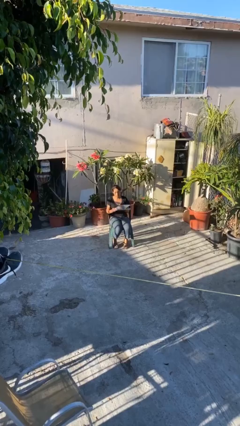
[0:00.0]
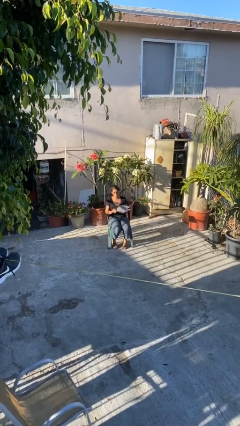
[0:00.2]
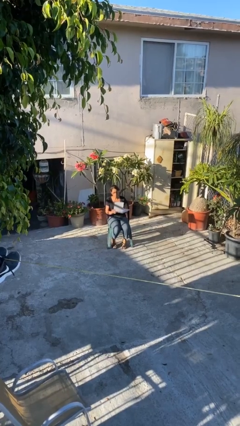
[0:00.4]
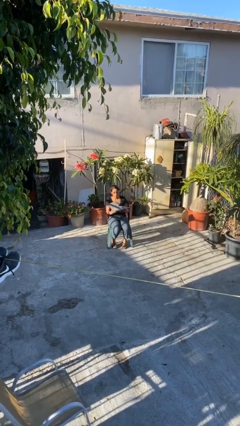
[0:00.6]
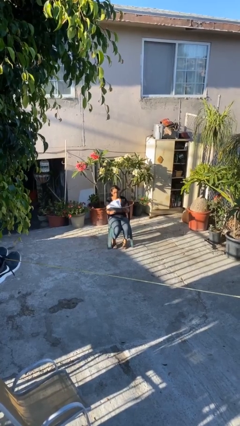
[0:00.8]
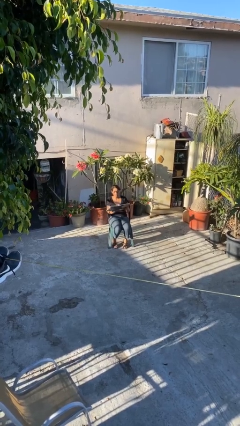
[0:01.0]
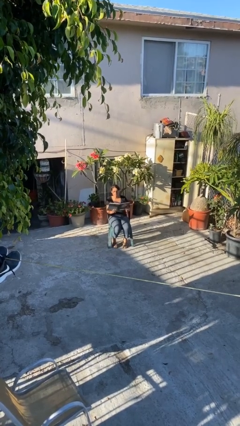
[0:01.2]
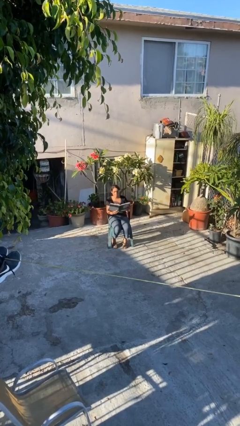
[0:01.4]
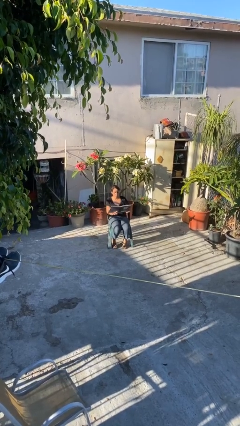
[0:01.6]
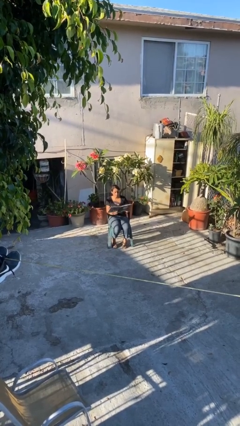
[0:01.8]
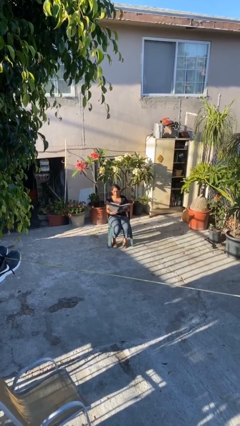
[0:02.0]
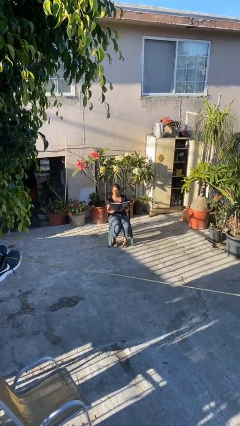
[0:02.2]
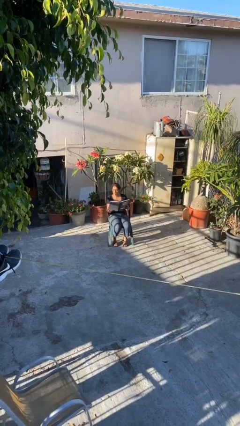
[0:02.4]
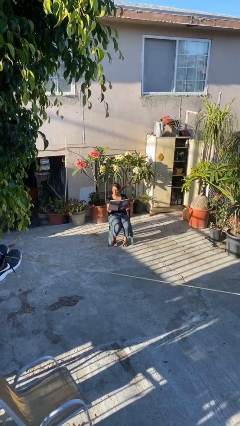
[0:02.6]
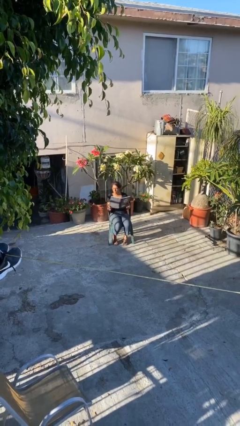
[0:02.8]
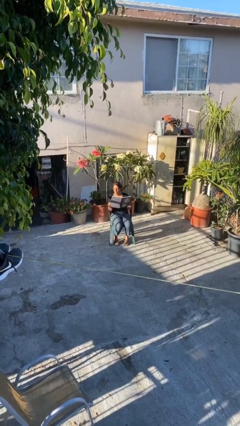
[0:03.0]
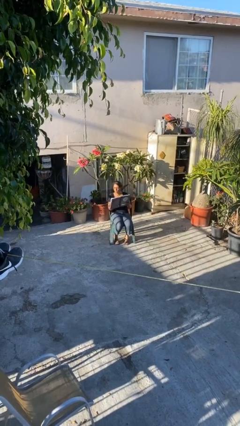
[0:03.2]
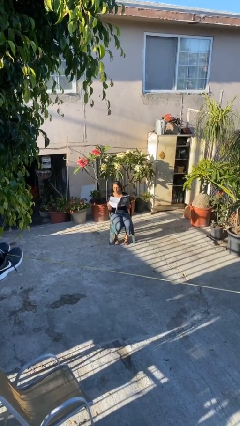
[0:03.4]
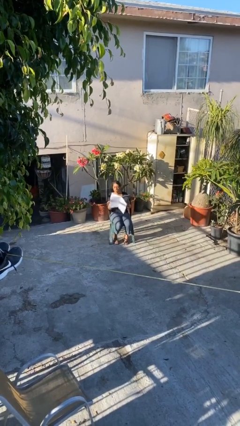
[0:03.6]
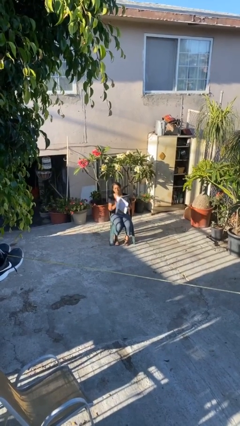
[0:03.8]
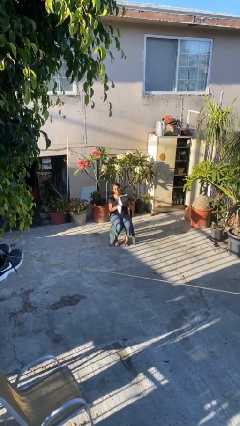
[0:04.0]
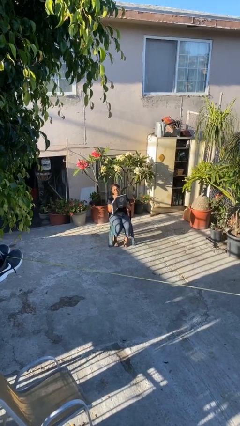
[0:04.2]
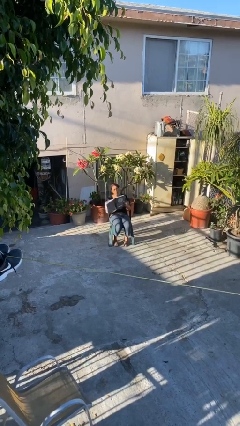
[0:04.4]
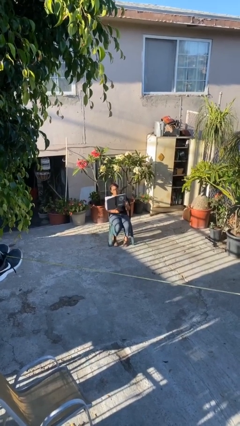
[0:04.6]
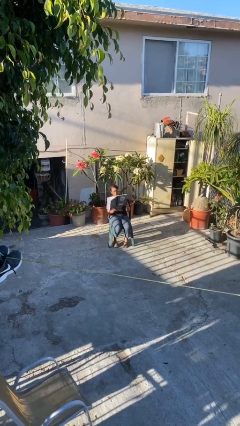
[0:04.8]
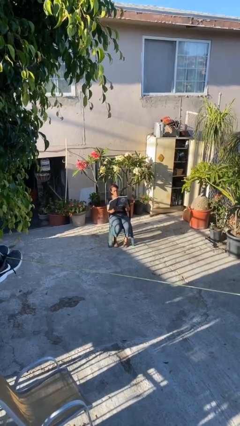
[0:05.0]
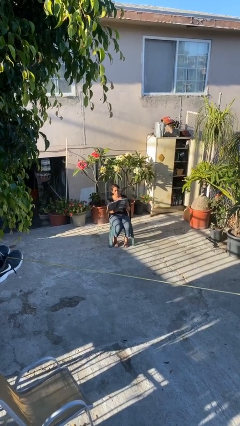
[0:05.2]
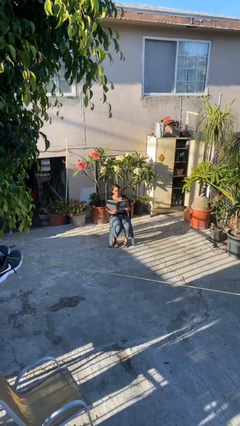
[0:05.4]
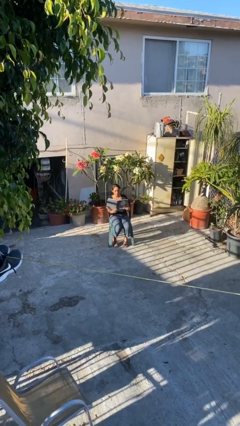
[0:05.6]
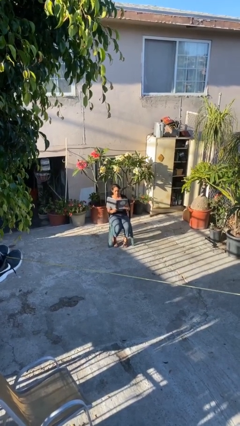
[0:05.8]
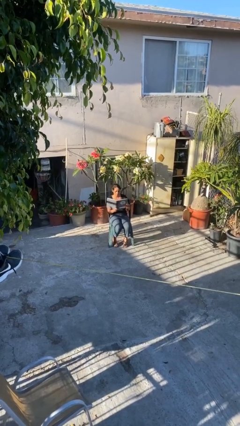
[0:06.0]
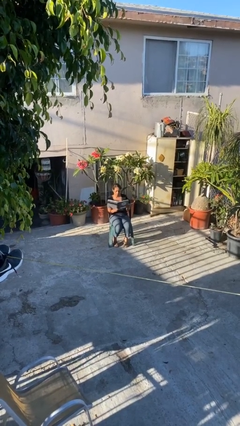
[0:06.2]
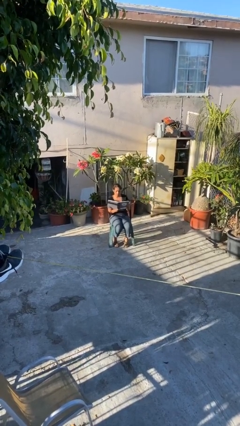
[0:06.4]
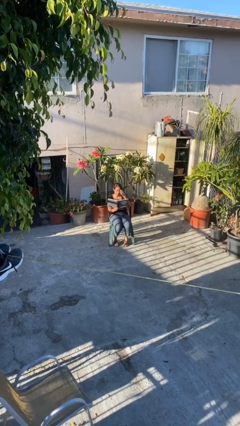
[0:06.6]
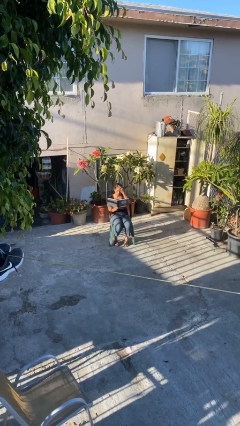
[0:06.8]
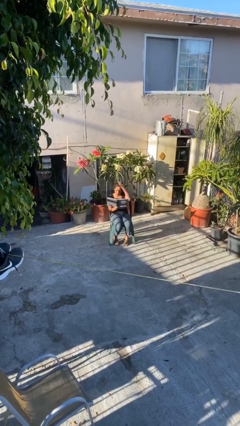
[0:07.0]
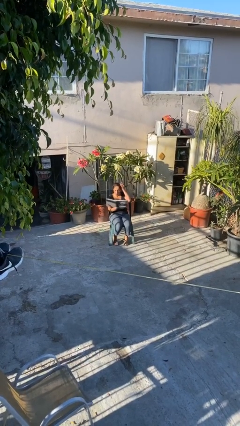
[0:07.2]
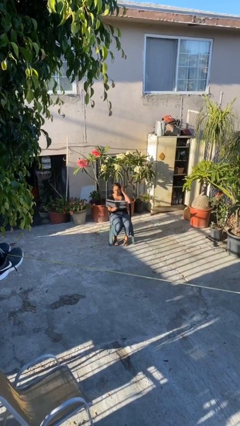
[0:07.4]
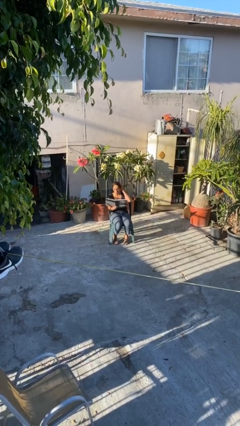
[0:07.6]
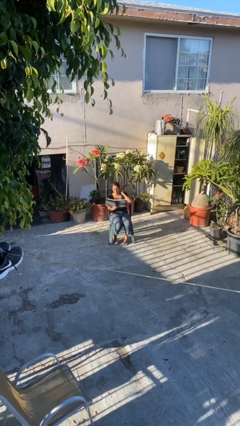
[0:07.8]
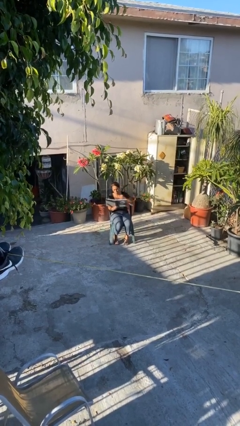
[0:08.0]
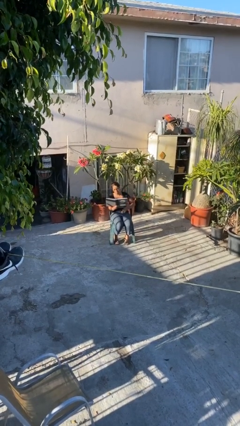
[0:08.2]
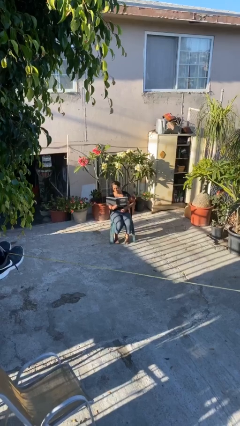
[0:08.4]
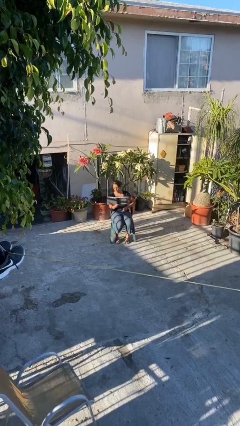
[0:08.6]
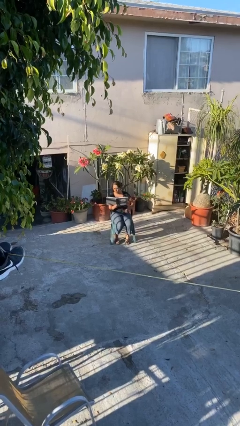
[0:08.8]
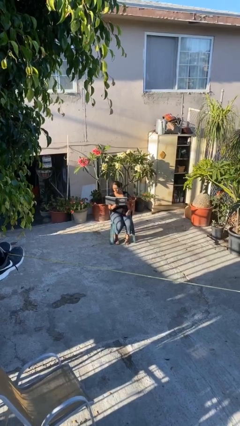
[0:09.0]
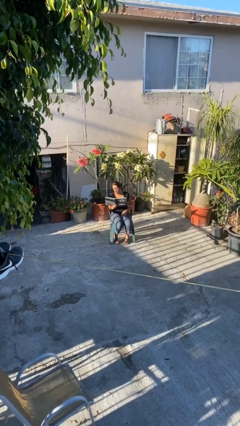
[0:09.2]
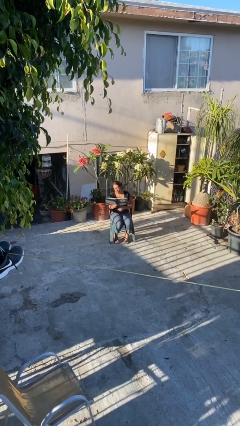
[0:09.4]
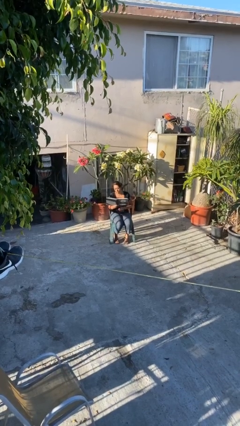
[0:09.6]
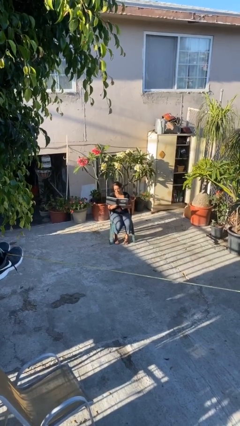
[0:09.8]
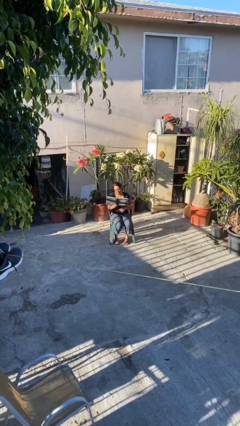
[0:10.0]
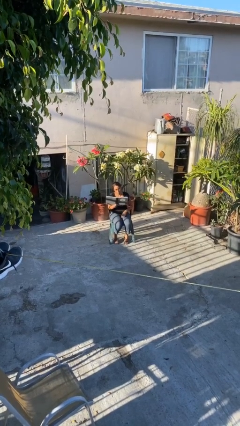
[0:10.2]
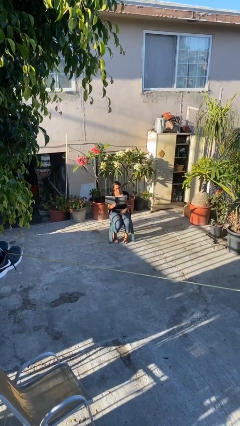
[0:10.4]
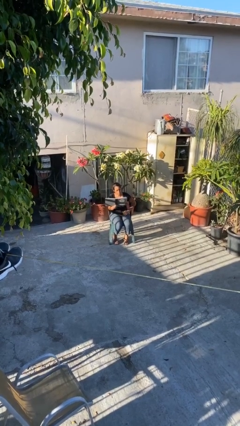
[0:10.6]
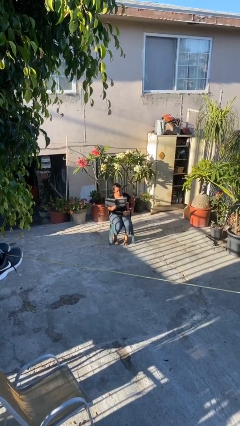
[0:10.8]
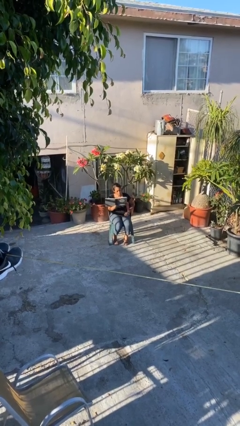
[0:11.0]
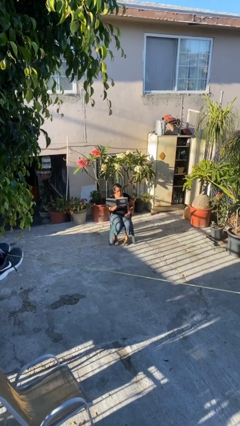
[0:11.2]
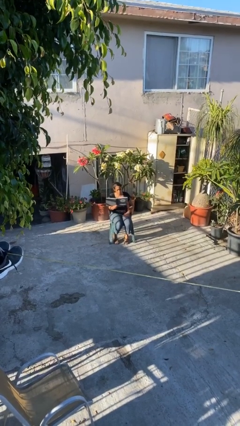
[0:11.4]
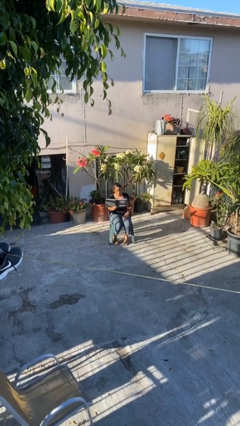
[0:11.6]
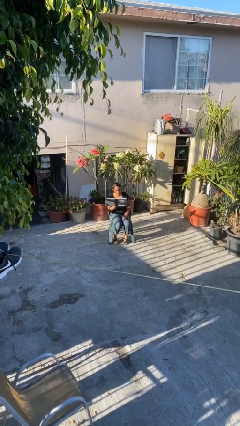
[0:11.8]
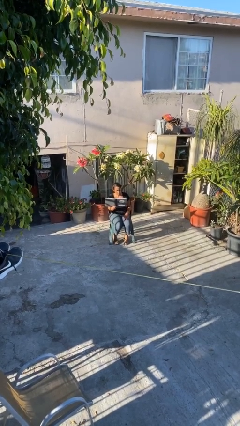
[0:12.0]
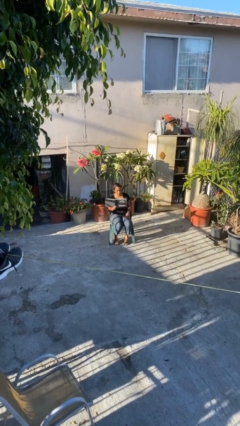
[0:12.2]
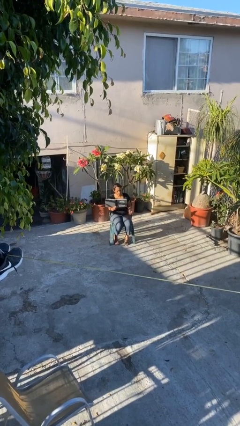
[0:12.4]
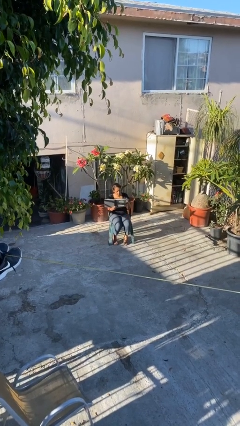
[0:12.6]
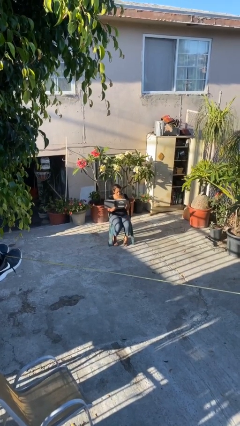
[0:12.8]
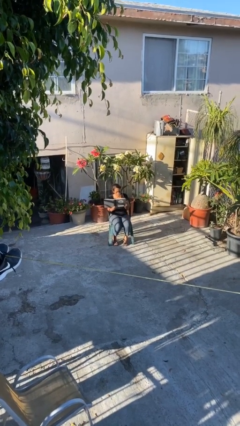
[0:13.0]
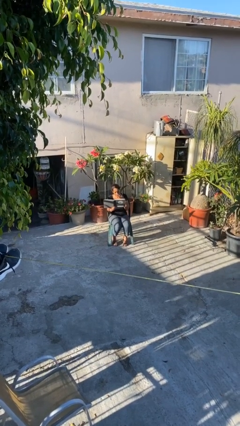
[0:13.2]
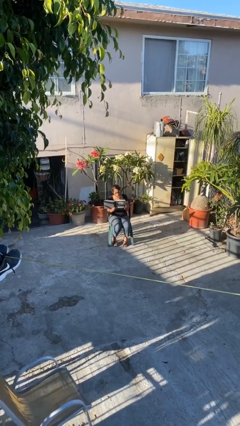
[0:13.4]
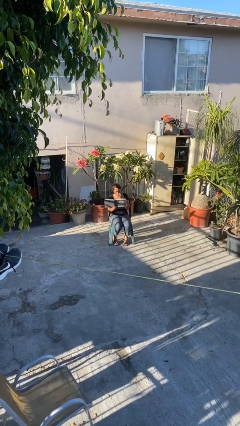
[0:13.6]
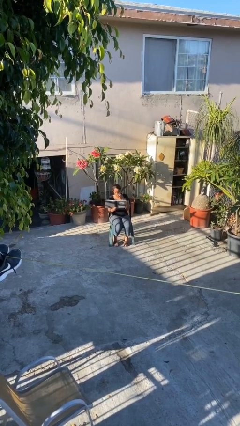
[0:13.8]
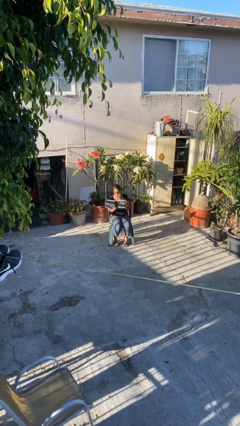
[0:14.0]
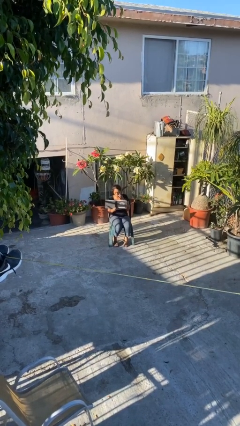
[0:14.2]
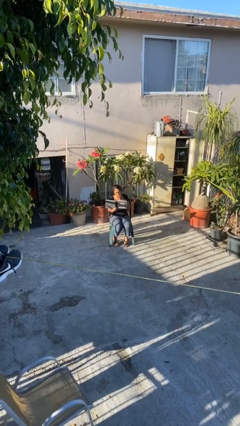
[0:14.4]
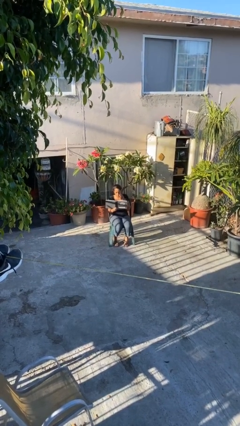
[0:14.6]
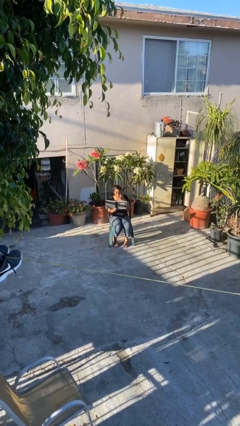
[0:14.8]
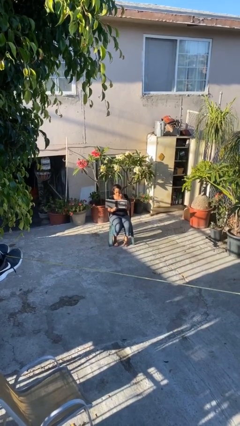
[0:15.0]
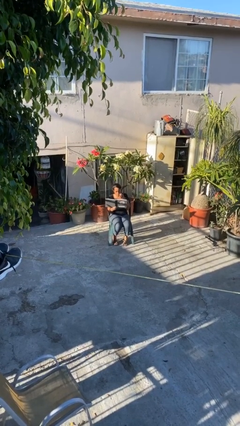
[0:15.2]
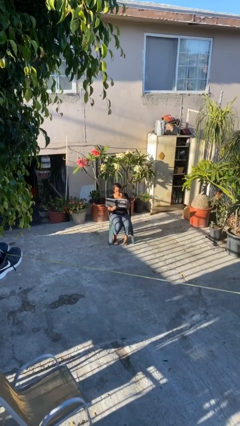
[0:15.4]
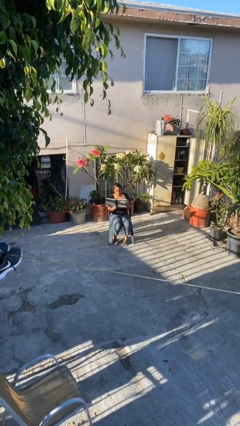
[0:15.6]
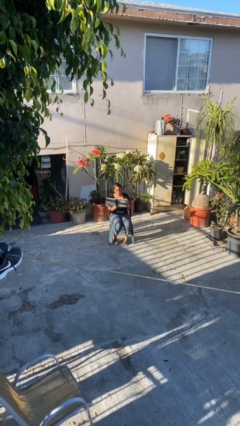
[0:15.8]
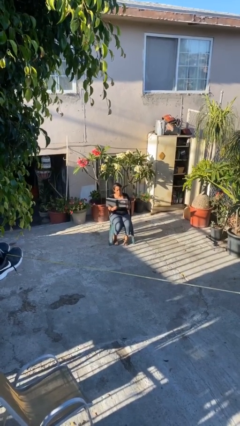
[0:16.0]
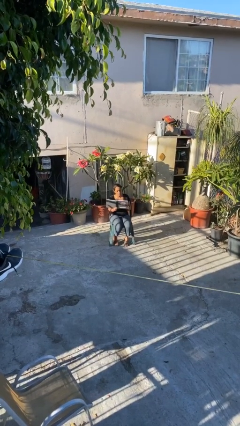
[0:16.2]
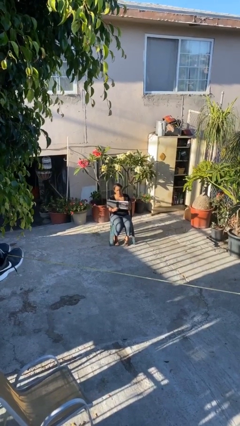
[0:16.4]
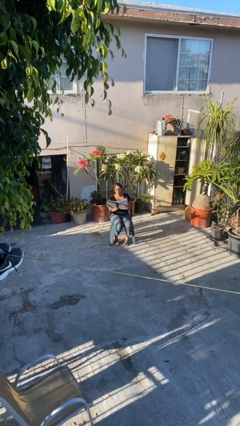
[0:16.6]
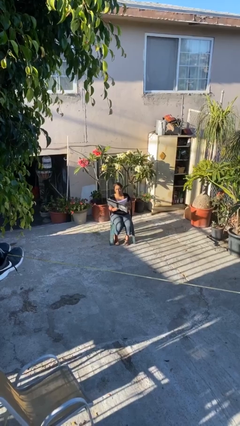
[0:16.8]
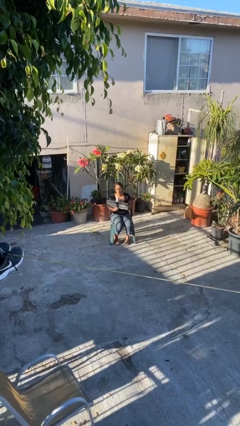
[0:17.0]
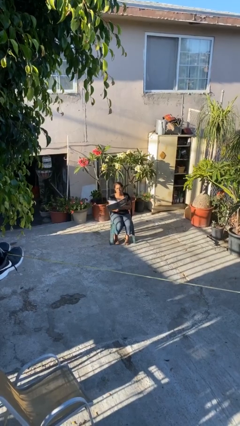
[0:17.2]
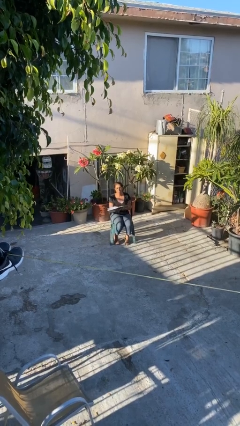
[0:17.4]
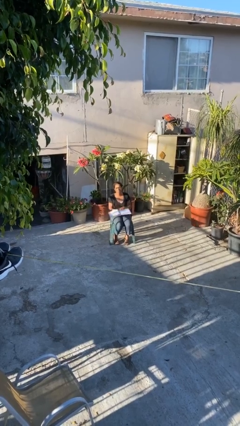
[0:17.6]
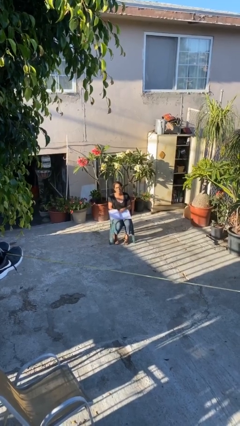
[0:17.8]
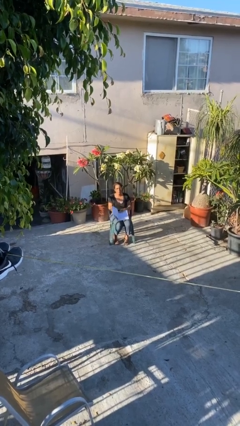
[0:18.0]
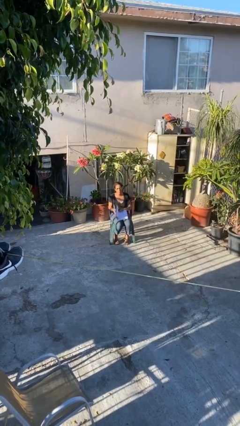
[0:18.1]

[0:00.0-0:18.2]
person reads document
